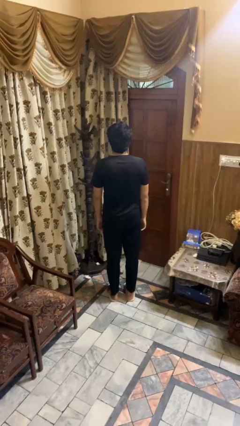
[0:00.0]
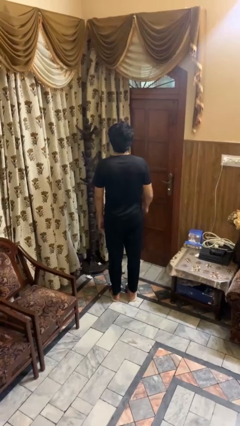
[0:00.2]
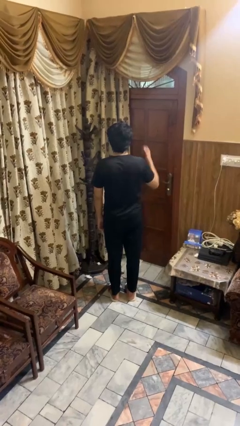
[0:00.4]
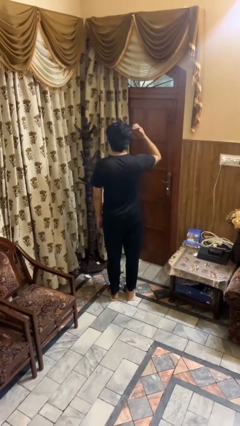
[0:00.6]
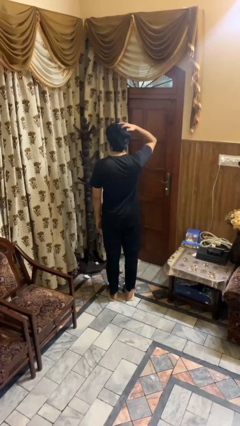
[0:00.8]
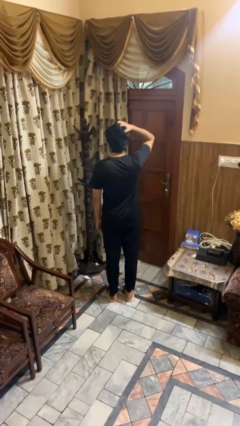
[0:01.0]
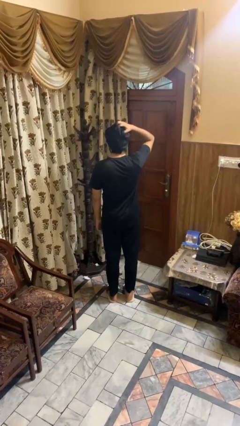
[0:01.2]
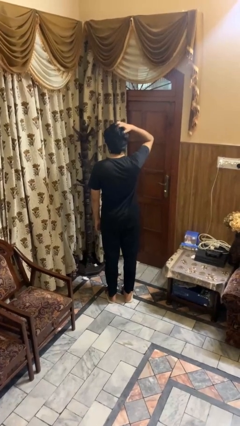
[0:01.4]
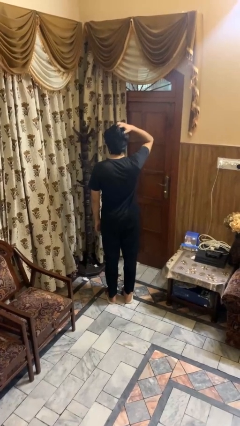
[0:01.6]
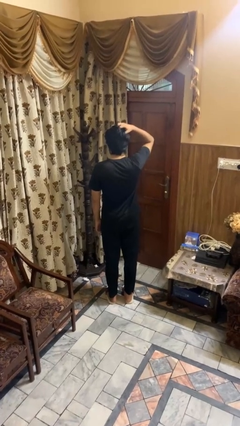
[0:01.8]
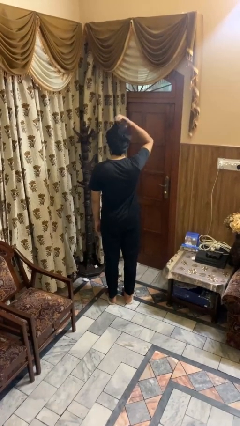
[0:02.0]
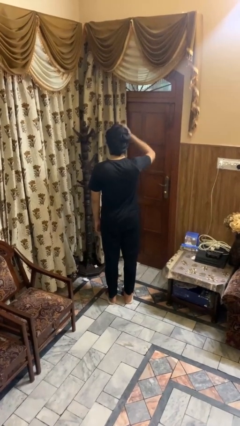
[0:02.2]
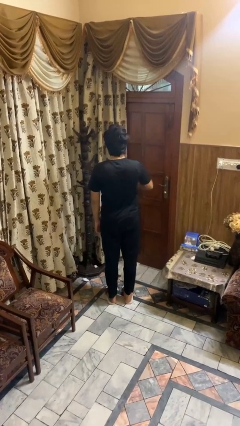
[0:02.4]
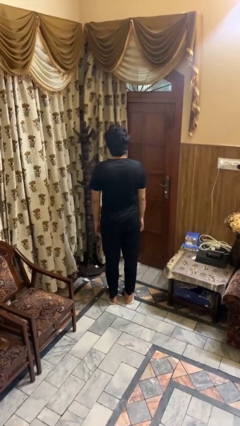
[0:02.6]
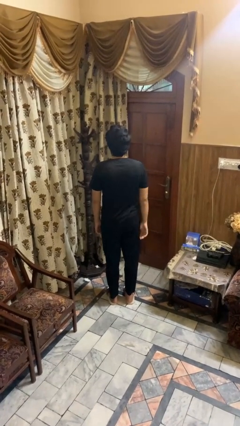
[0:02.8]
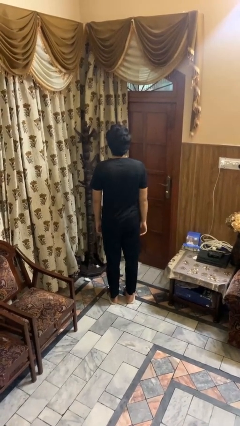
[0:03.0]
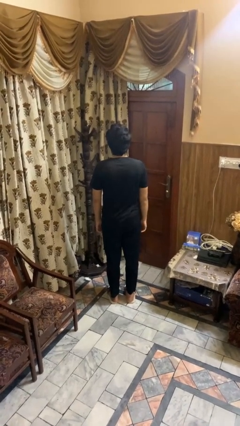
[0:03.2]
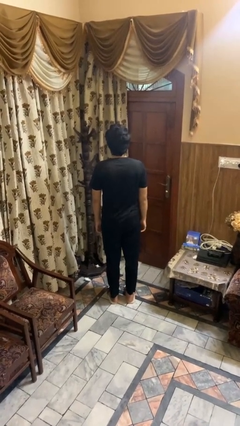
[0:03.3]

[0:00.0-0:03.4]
person scratches face

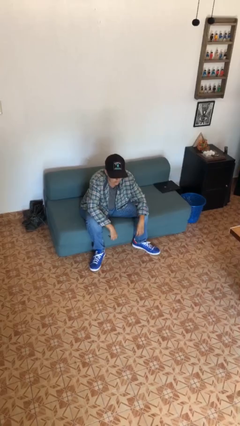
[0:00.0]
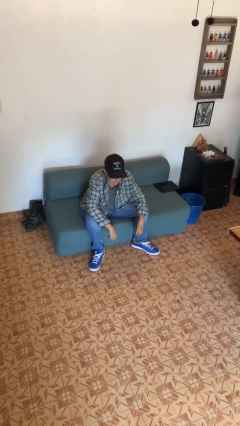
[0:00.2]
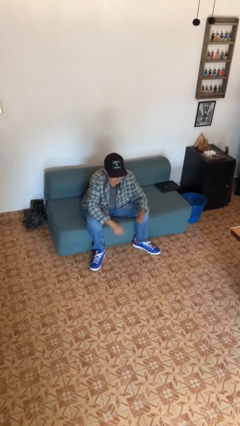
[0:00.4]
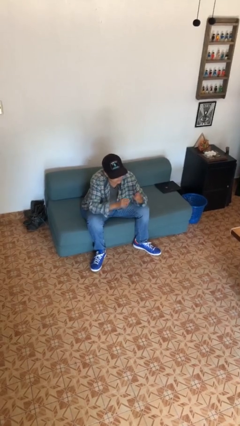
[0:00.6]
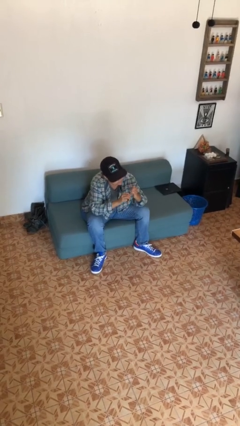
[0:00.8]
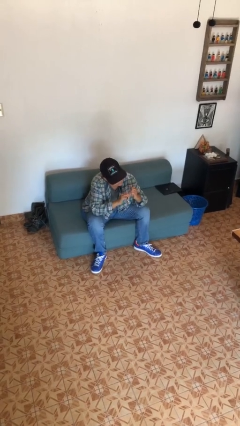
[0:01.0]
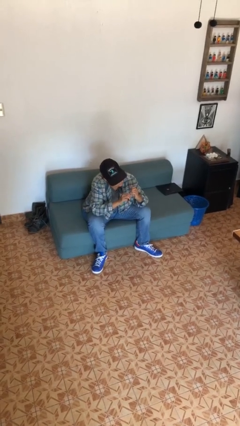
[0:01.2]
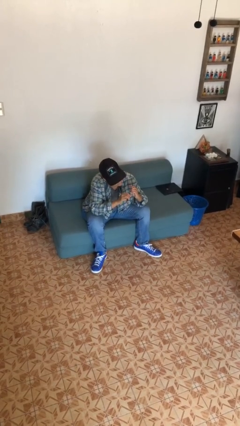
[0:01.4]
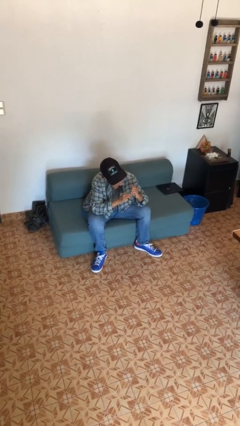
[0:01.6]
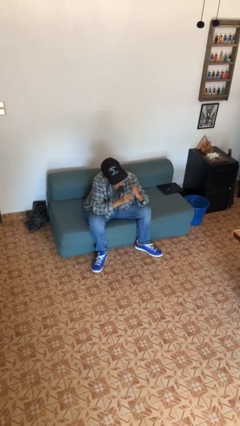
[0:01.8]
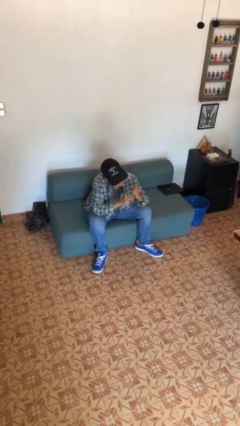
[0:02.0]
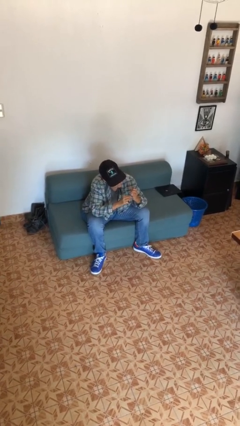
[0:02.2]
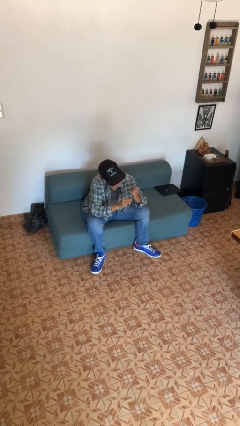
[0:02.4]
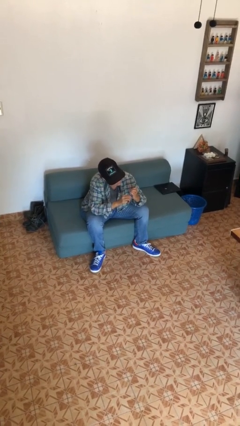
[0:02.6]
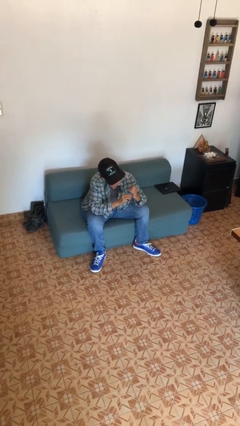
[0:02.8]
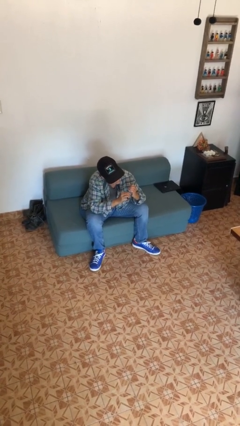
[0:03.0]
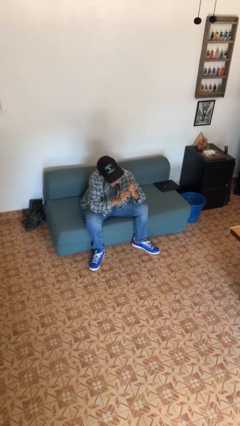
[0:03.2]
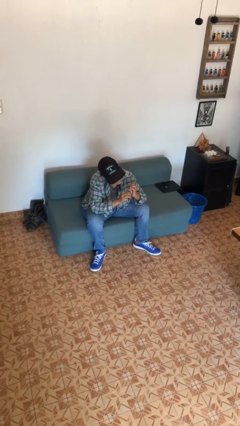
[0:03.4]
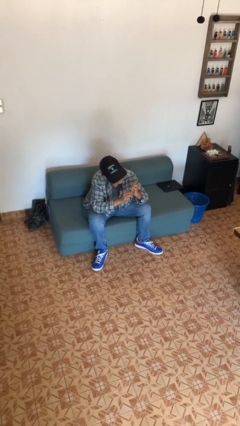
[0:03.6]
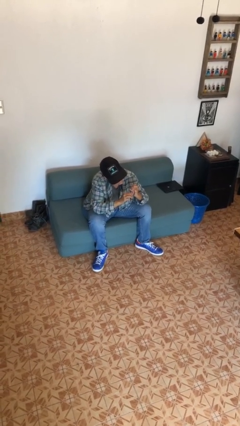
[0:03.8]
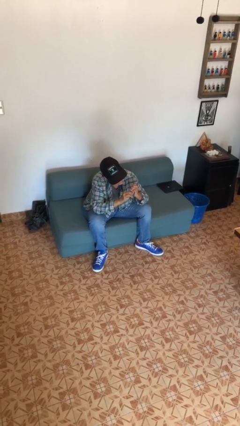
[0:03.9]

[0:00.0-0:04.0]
person files fingernails

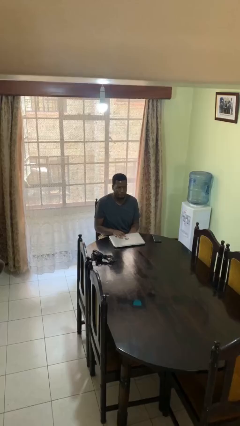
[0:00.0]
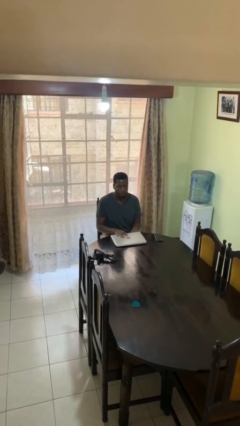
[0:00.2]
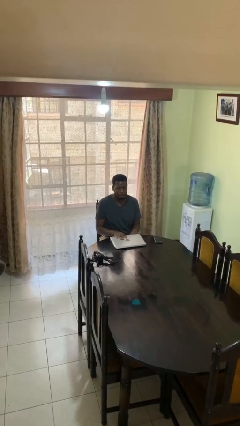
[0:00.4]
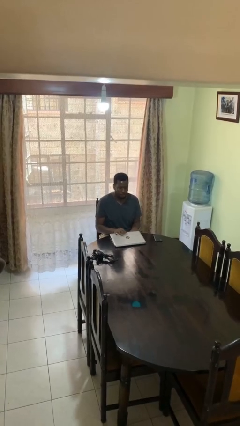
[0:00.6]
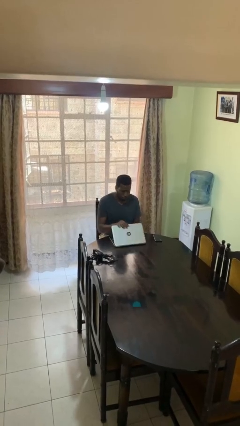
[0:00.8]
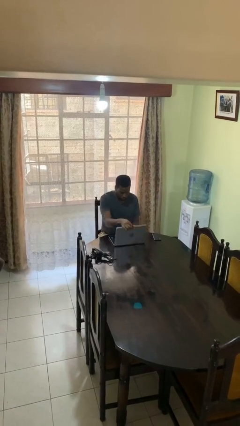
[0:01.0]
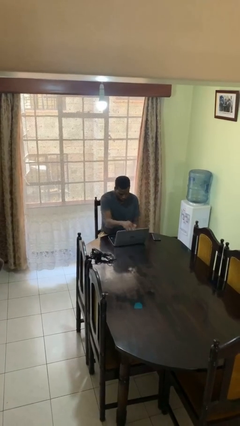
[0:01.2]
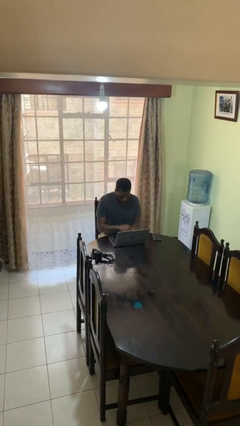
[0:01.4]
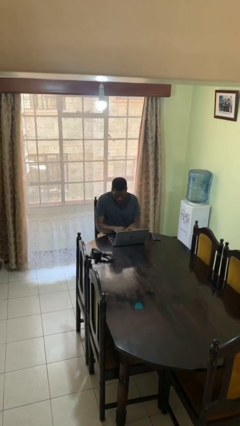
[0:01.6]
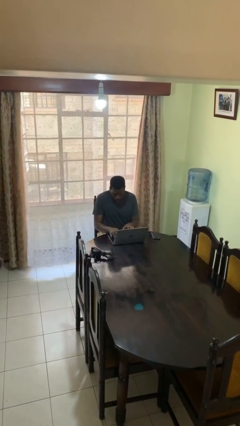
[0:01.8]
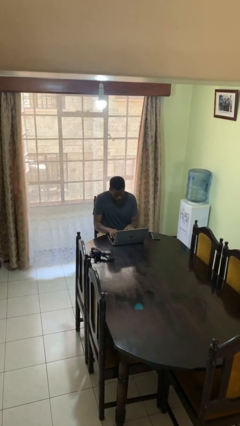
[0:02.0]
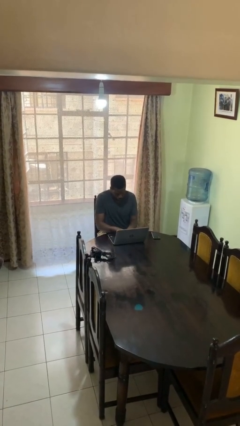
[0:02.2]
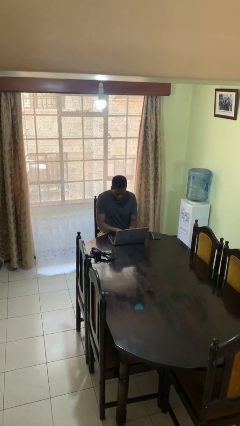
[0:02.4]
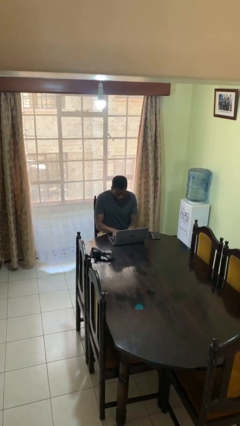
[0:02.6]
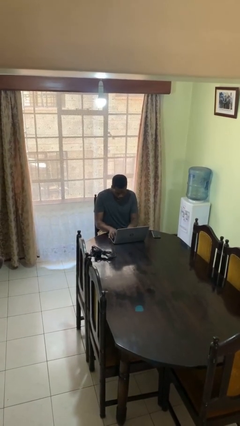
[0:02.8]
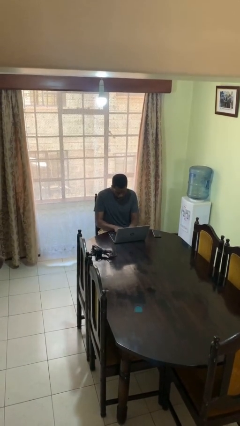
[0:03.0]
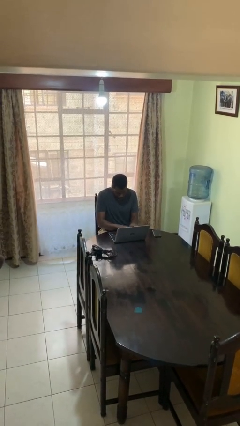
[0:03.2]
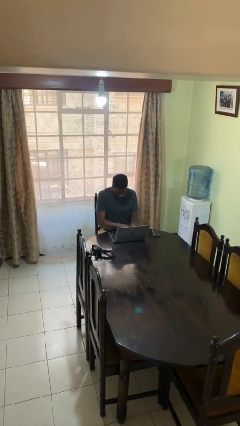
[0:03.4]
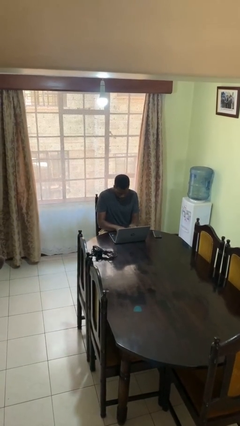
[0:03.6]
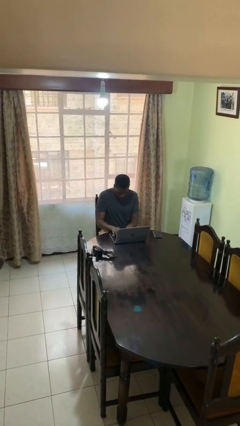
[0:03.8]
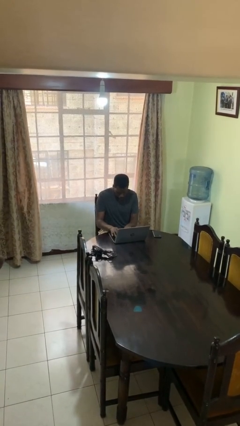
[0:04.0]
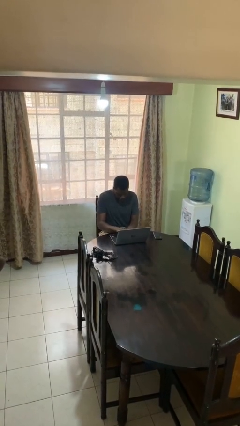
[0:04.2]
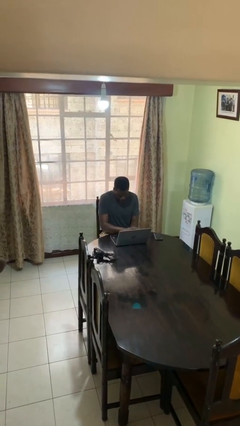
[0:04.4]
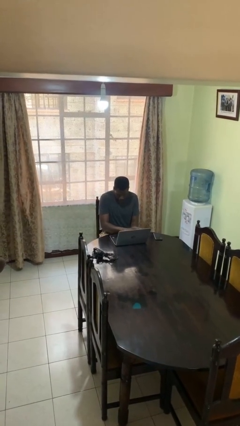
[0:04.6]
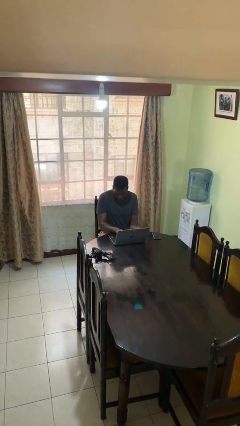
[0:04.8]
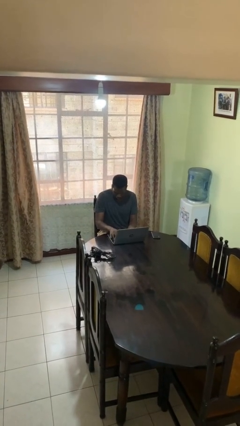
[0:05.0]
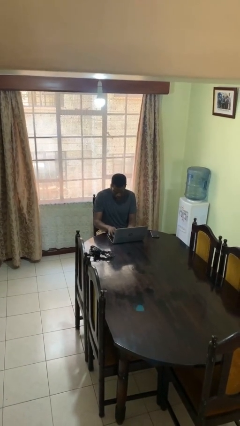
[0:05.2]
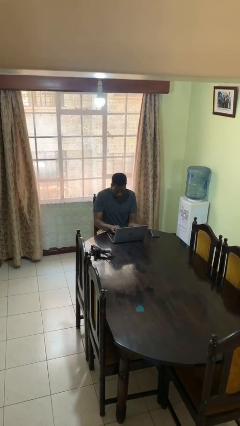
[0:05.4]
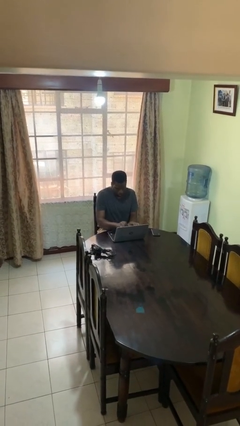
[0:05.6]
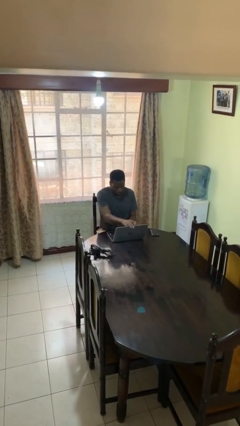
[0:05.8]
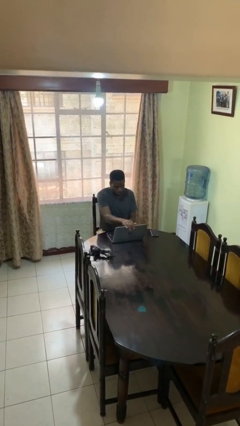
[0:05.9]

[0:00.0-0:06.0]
person interacts with laptop

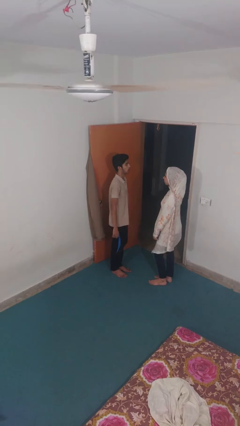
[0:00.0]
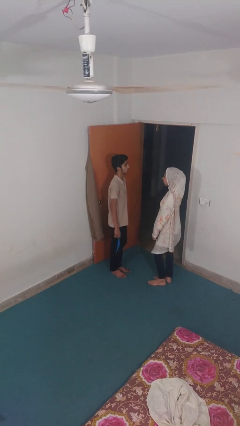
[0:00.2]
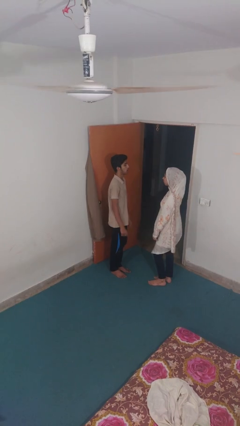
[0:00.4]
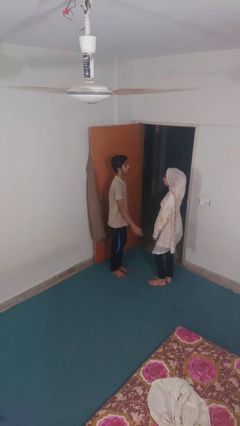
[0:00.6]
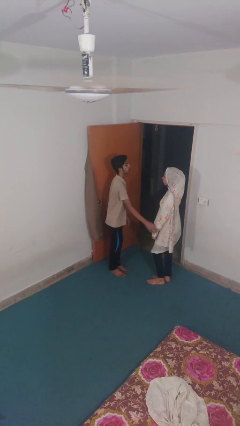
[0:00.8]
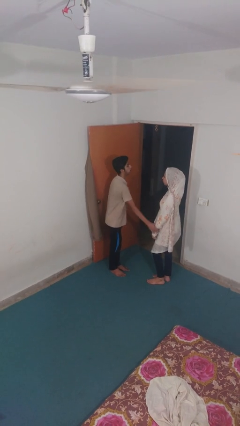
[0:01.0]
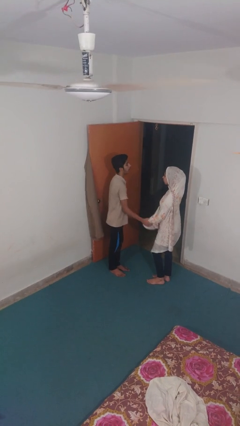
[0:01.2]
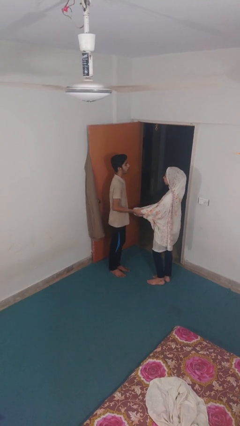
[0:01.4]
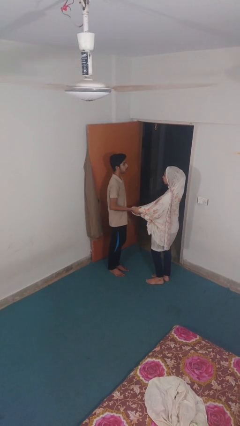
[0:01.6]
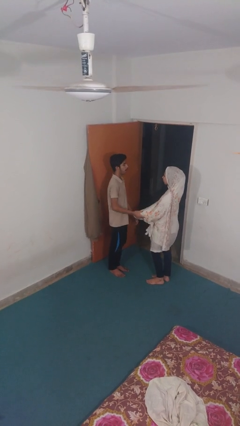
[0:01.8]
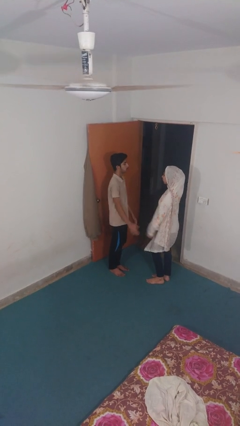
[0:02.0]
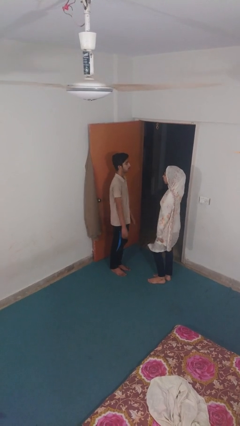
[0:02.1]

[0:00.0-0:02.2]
person grabs person by forearm

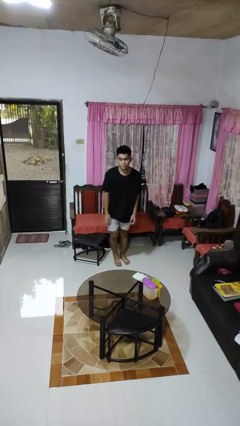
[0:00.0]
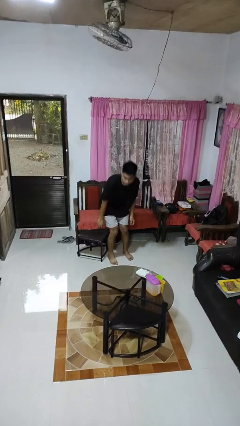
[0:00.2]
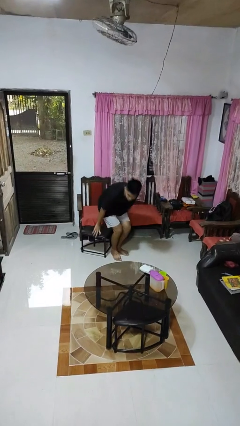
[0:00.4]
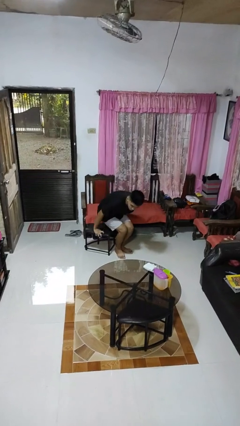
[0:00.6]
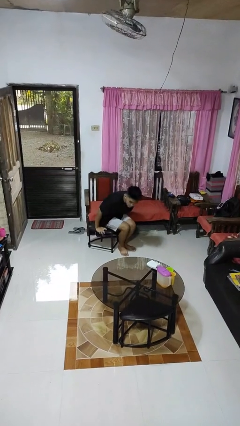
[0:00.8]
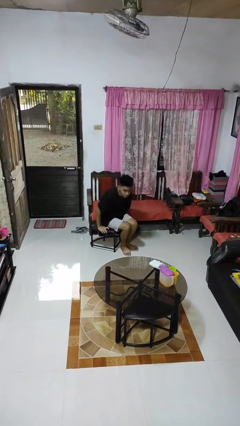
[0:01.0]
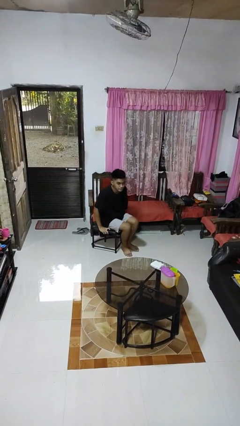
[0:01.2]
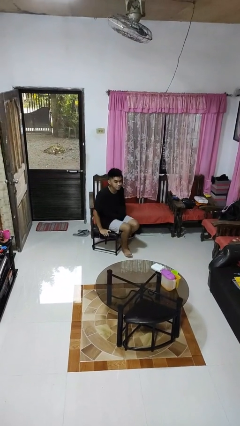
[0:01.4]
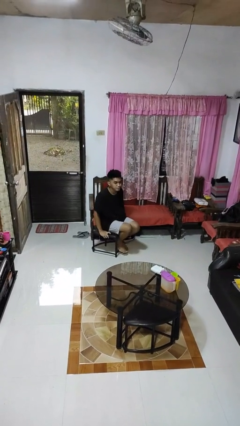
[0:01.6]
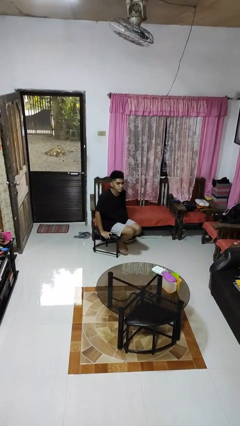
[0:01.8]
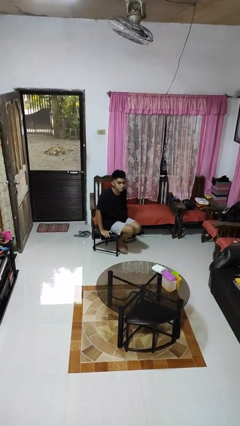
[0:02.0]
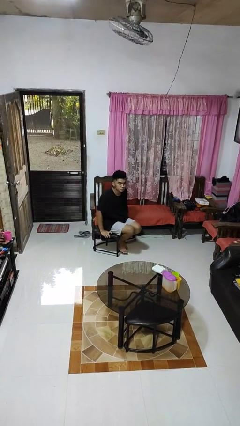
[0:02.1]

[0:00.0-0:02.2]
person sits down
